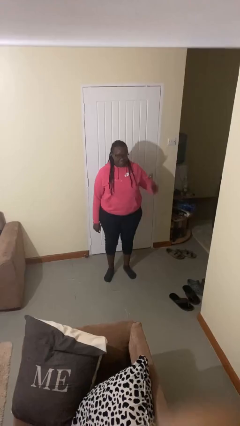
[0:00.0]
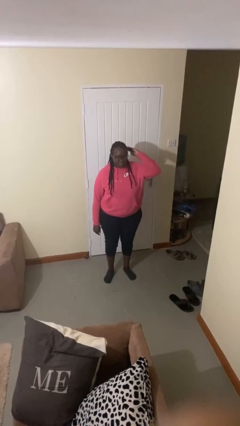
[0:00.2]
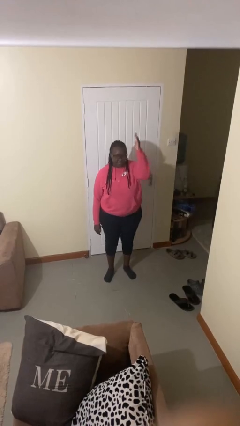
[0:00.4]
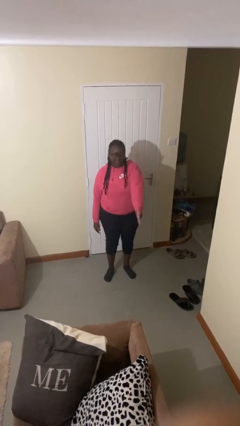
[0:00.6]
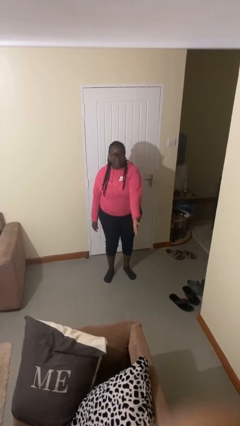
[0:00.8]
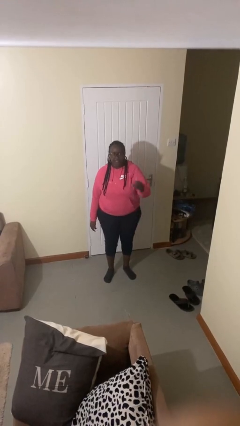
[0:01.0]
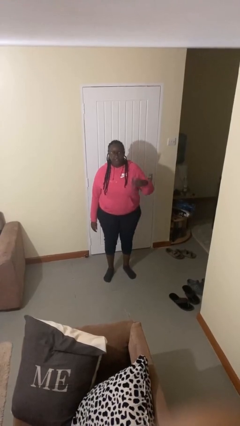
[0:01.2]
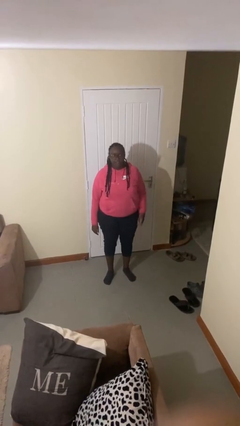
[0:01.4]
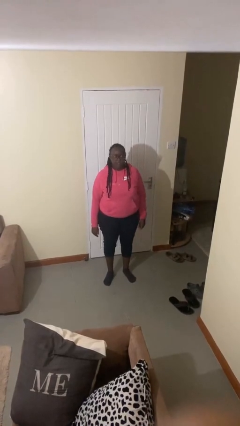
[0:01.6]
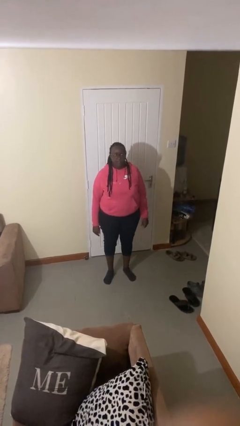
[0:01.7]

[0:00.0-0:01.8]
person karate chop

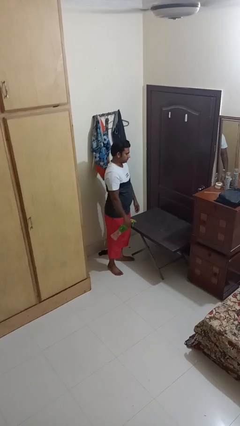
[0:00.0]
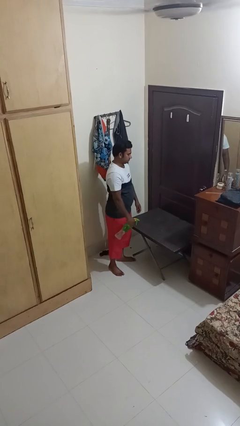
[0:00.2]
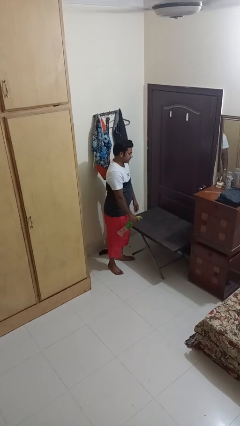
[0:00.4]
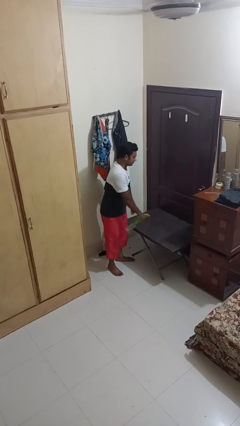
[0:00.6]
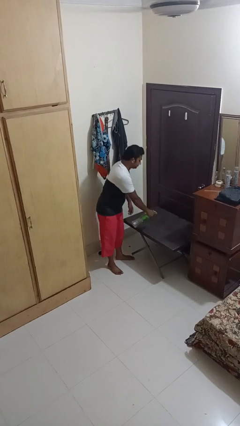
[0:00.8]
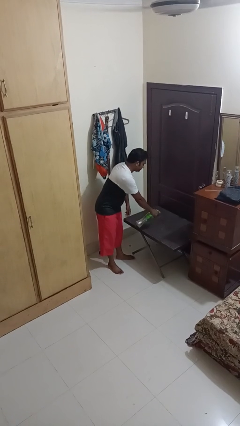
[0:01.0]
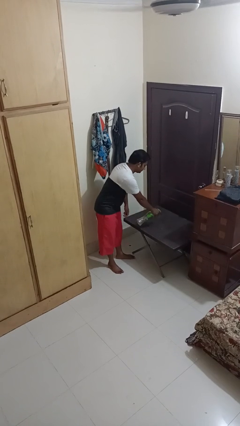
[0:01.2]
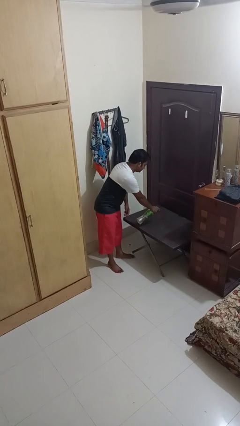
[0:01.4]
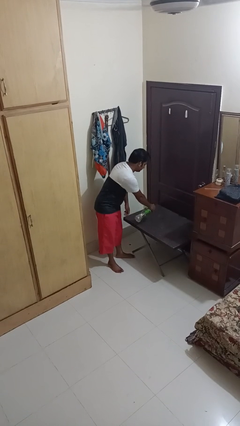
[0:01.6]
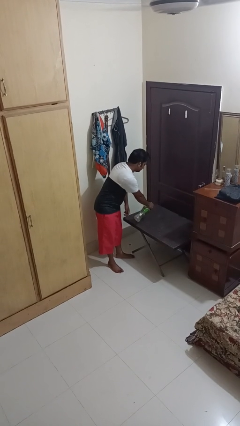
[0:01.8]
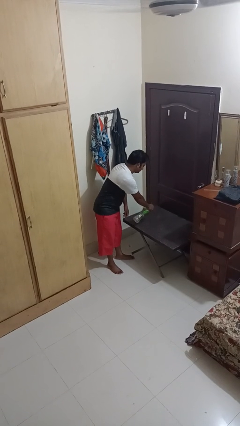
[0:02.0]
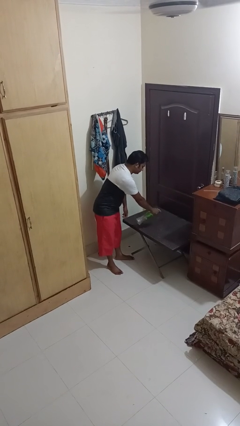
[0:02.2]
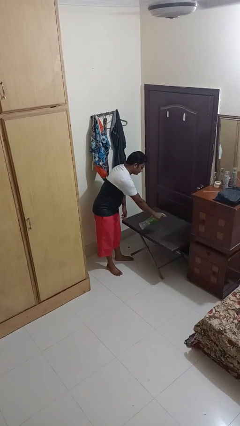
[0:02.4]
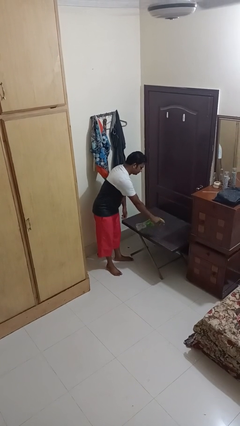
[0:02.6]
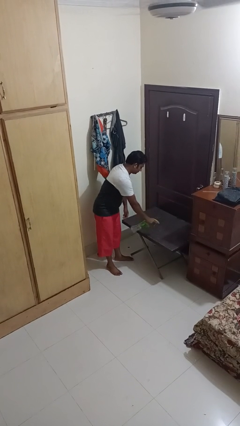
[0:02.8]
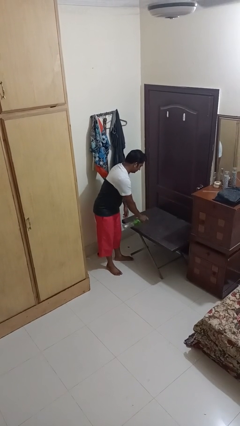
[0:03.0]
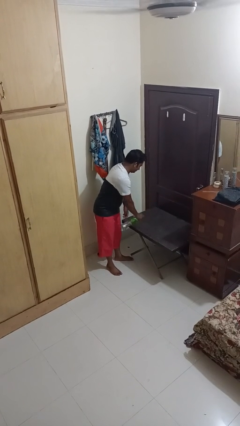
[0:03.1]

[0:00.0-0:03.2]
person sprays from bottle

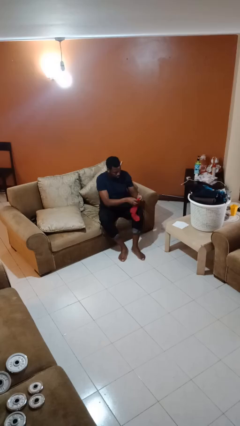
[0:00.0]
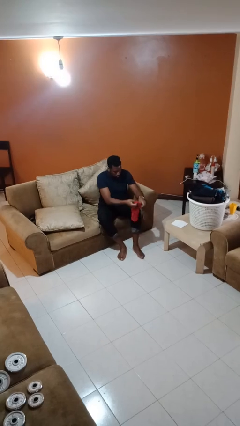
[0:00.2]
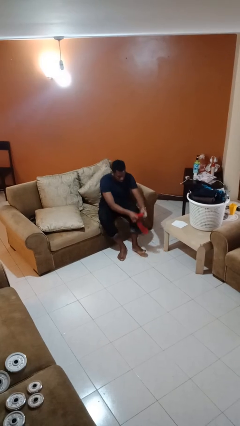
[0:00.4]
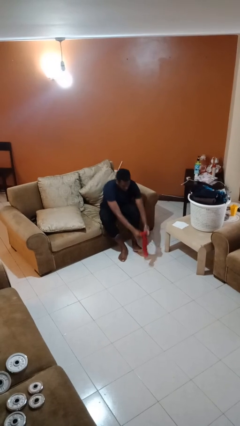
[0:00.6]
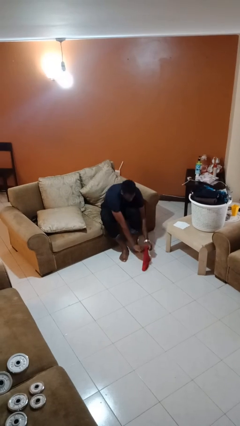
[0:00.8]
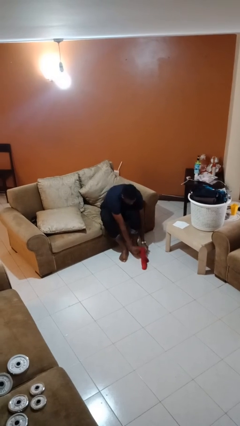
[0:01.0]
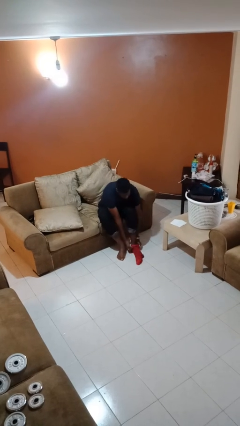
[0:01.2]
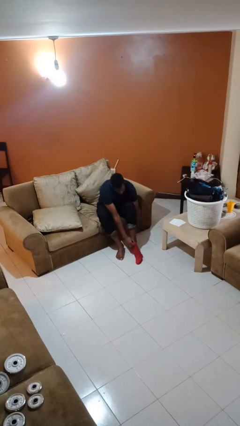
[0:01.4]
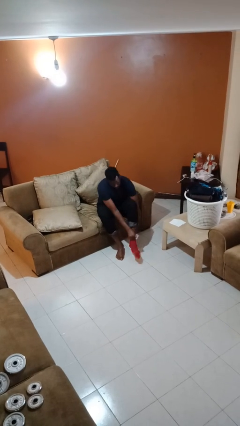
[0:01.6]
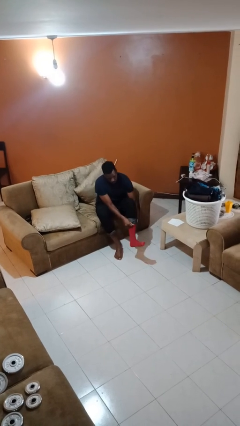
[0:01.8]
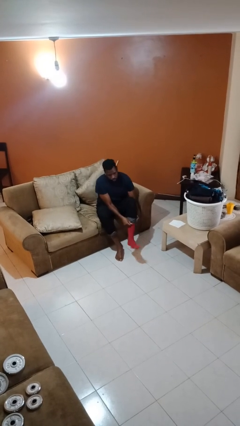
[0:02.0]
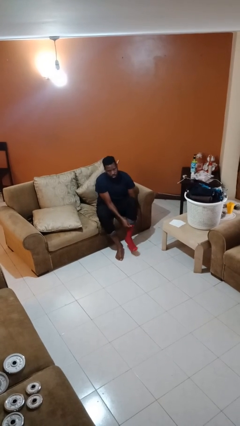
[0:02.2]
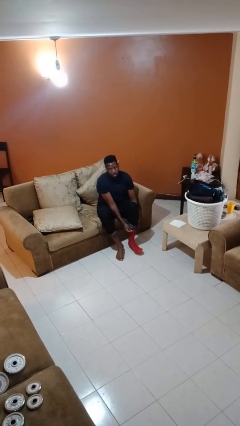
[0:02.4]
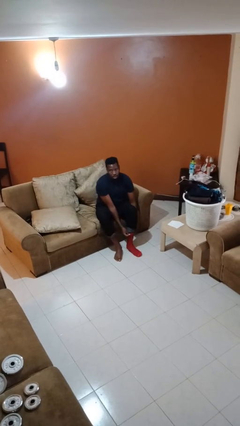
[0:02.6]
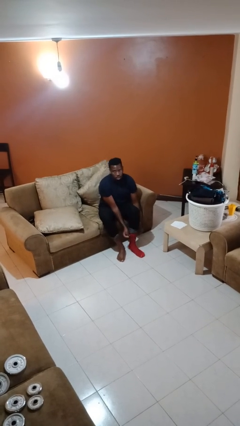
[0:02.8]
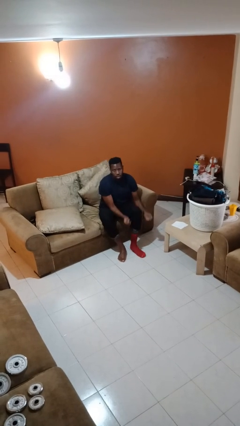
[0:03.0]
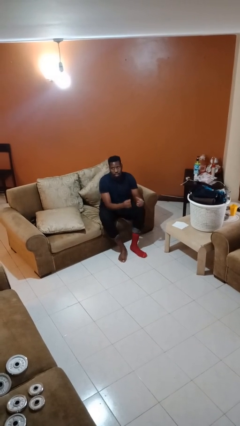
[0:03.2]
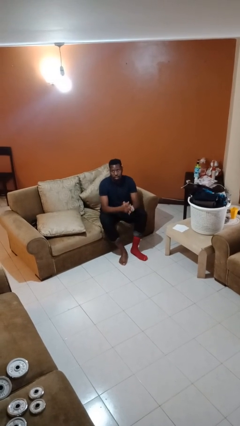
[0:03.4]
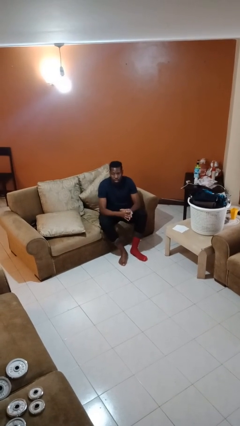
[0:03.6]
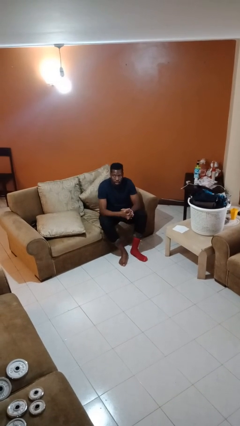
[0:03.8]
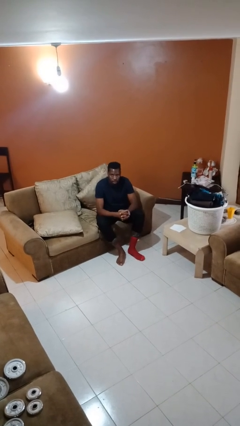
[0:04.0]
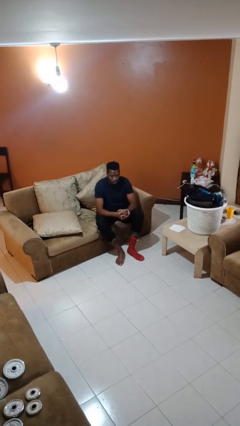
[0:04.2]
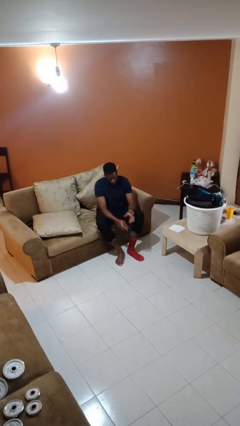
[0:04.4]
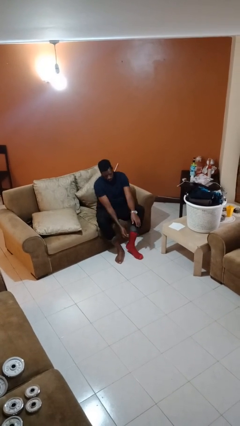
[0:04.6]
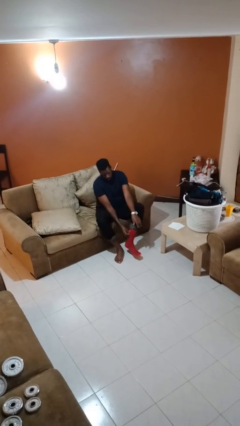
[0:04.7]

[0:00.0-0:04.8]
person puts on socks

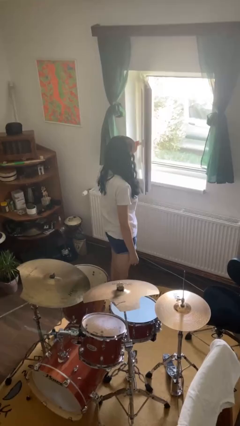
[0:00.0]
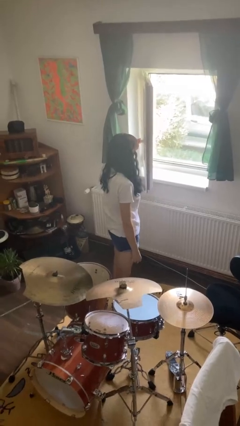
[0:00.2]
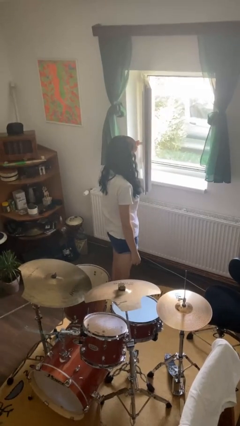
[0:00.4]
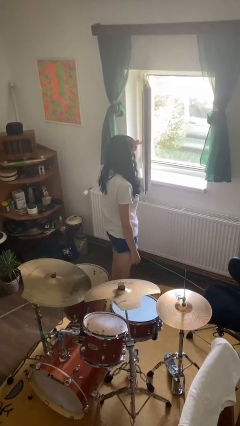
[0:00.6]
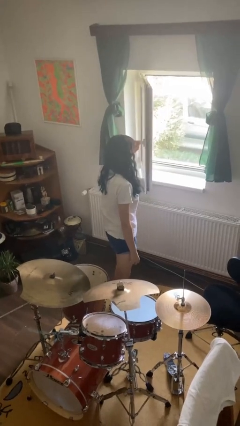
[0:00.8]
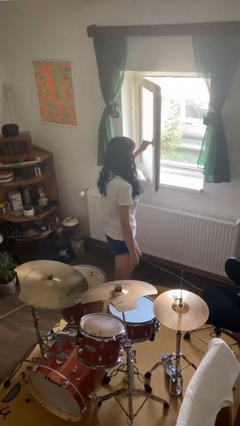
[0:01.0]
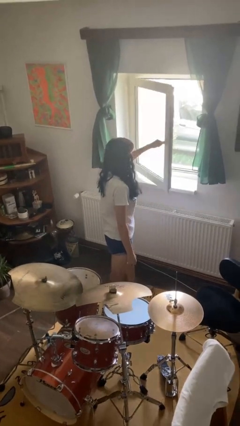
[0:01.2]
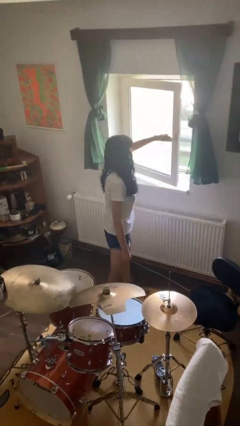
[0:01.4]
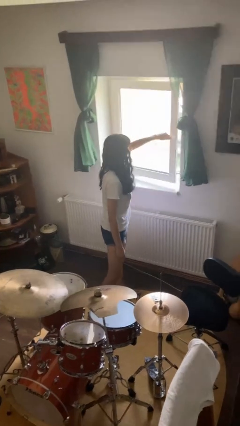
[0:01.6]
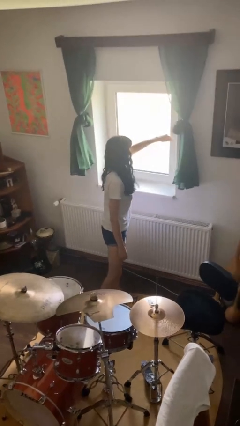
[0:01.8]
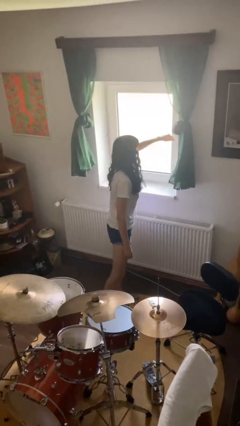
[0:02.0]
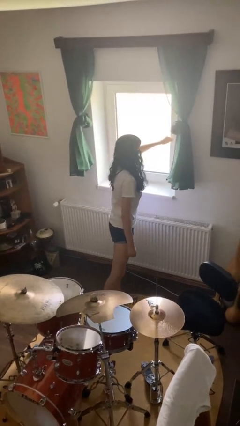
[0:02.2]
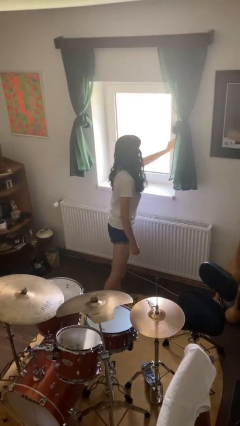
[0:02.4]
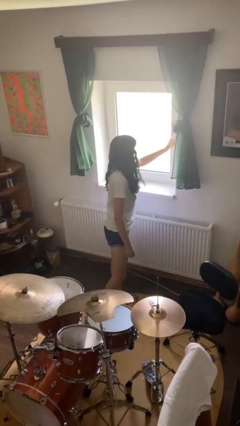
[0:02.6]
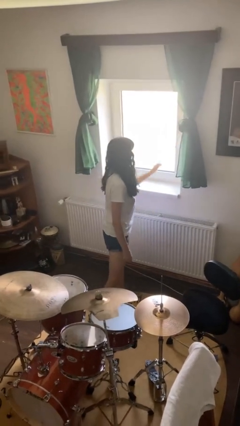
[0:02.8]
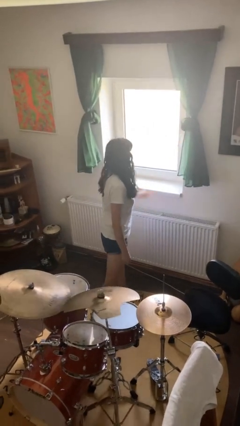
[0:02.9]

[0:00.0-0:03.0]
person closes home window

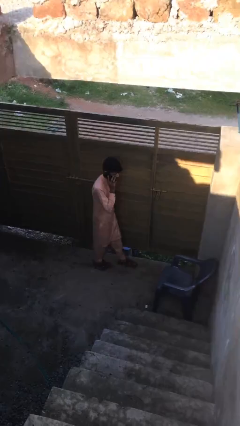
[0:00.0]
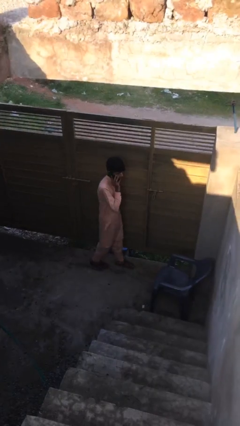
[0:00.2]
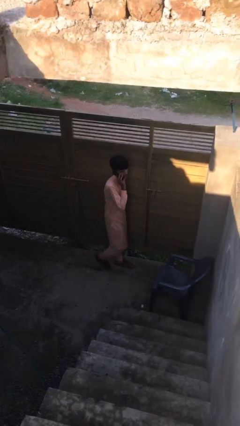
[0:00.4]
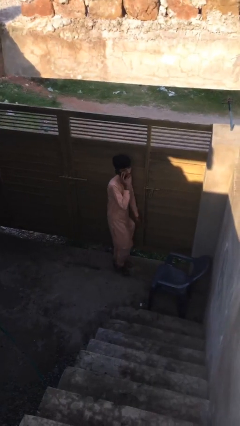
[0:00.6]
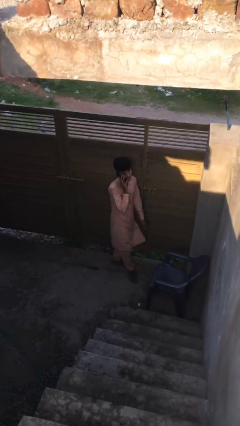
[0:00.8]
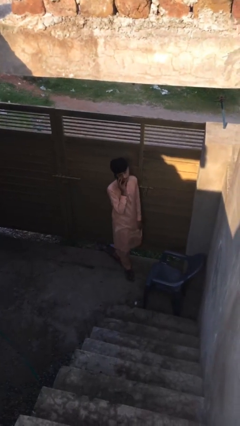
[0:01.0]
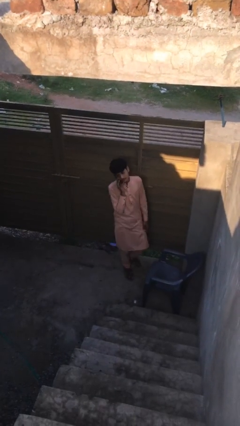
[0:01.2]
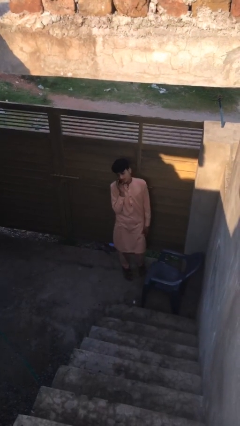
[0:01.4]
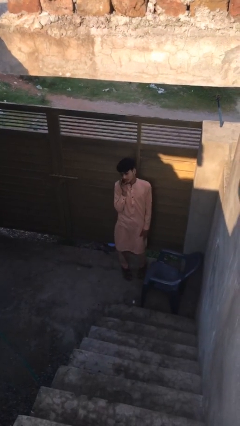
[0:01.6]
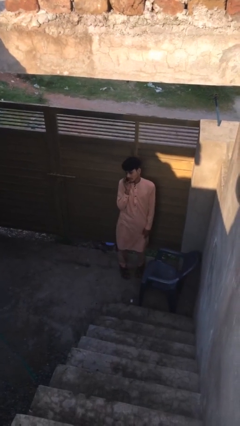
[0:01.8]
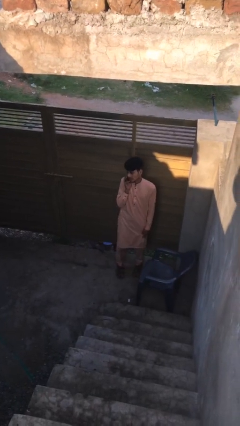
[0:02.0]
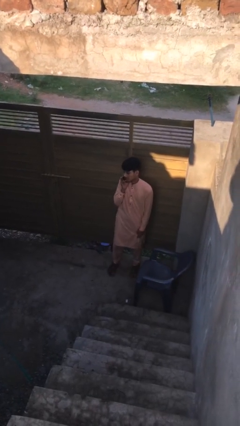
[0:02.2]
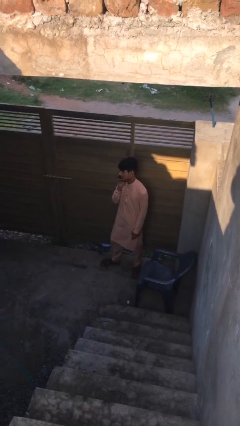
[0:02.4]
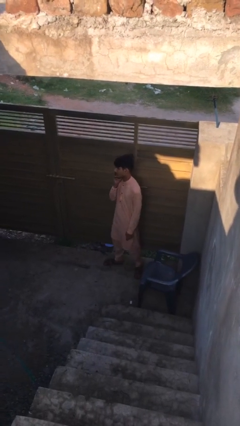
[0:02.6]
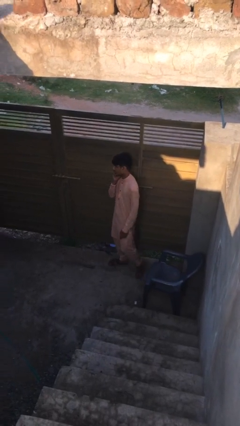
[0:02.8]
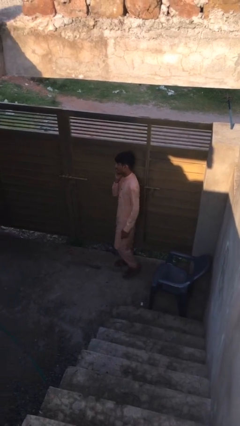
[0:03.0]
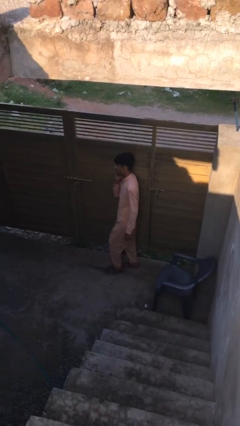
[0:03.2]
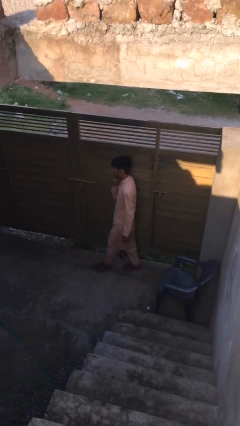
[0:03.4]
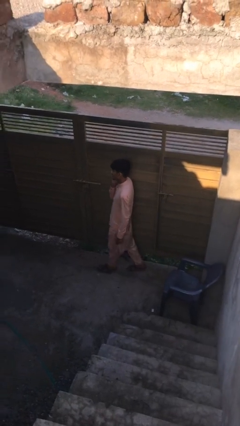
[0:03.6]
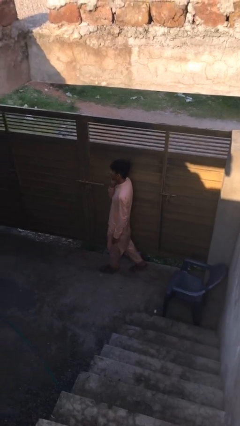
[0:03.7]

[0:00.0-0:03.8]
person talks on phone

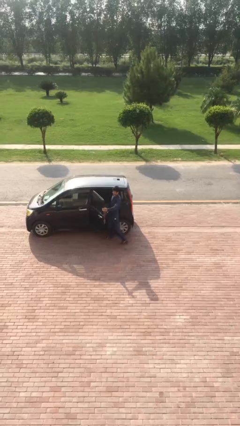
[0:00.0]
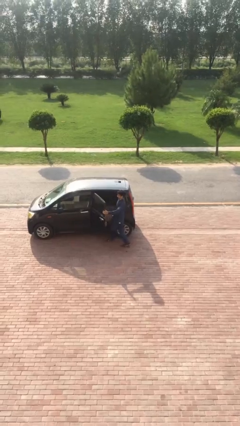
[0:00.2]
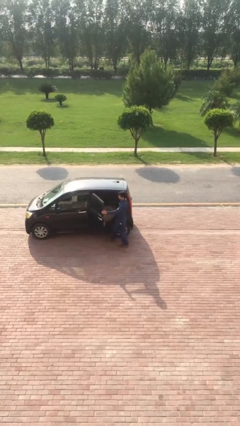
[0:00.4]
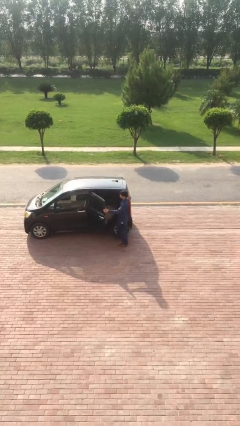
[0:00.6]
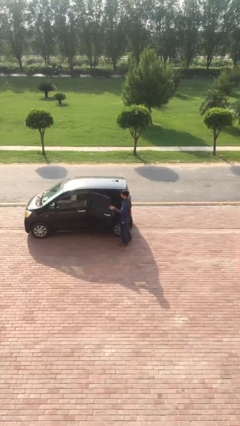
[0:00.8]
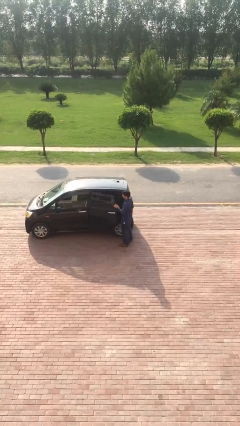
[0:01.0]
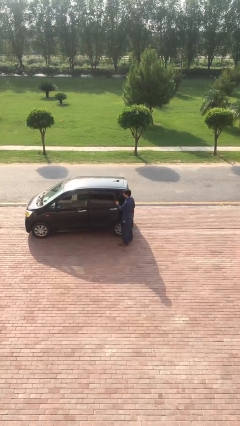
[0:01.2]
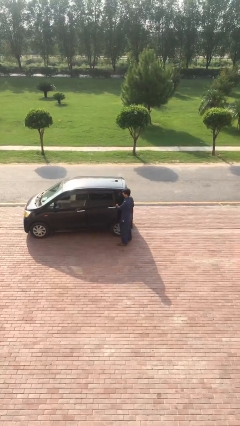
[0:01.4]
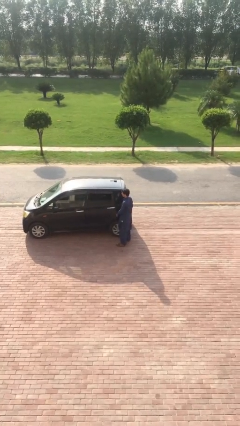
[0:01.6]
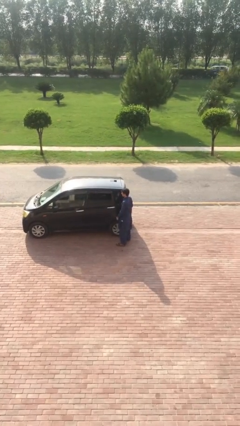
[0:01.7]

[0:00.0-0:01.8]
person closes car door
